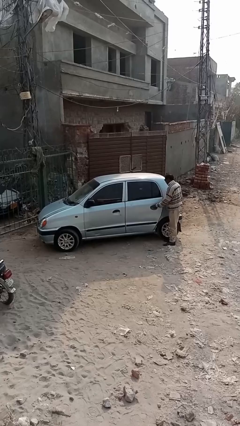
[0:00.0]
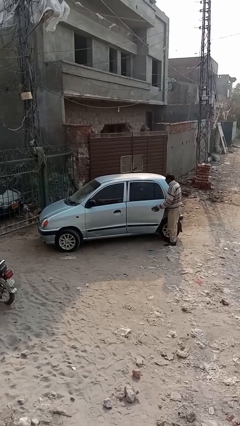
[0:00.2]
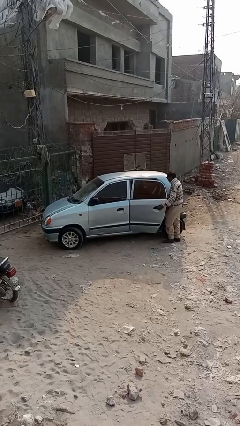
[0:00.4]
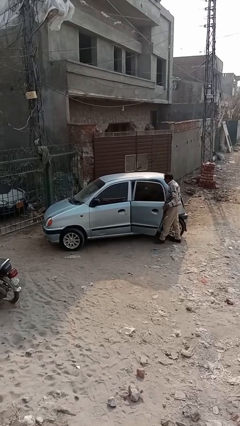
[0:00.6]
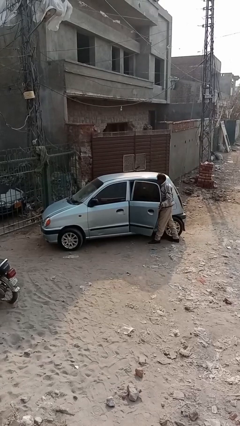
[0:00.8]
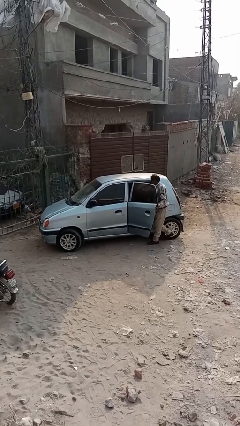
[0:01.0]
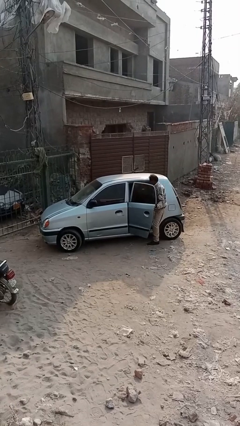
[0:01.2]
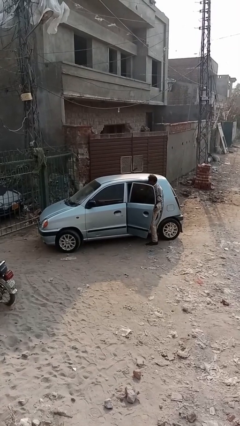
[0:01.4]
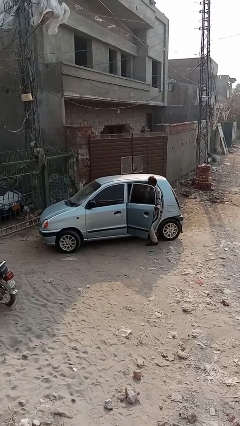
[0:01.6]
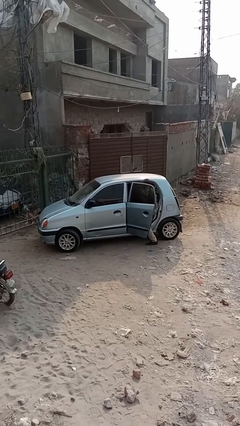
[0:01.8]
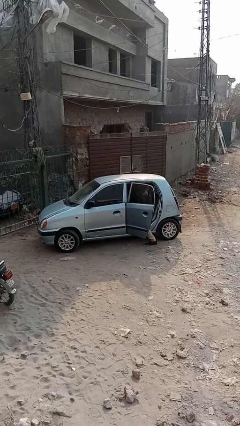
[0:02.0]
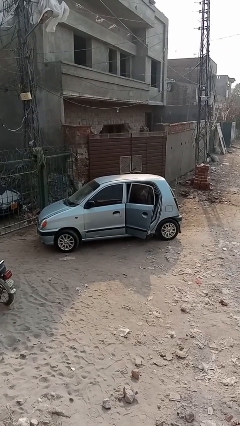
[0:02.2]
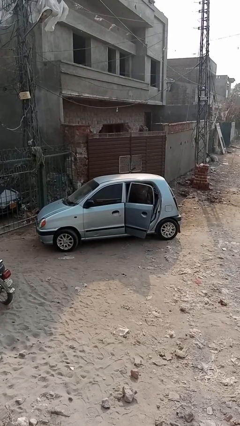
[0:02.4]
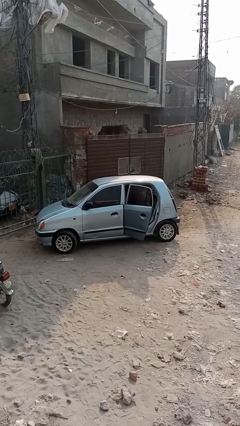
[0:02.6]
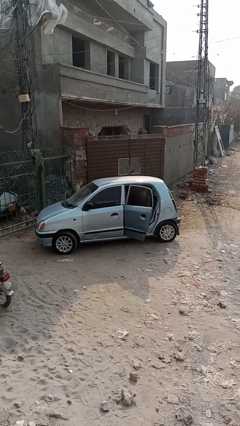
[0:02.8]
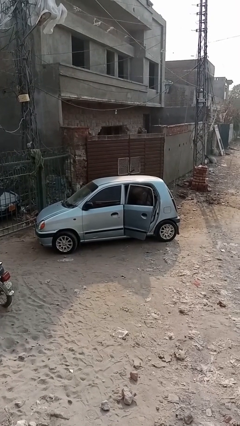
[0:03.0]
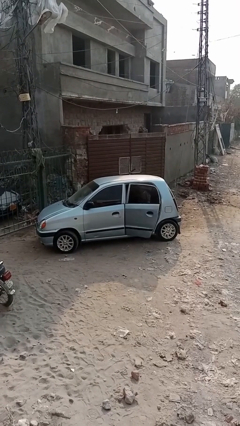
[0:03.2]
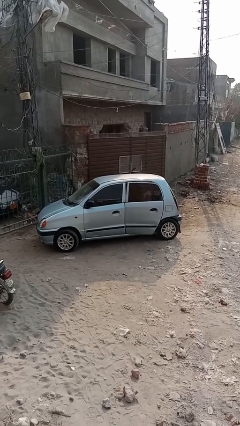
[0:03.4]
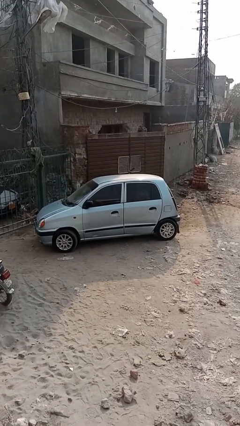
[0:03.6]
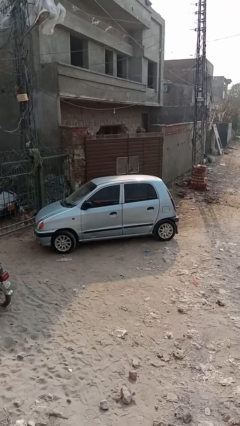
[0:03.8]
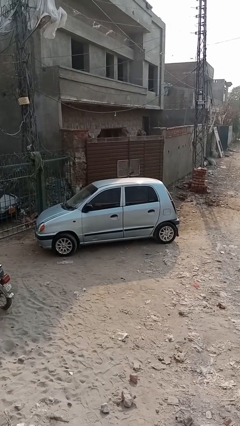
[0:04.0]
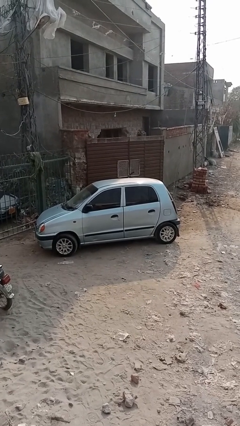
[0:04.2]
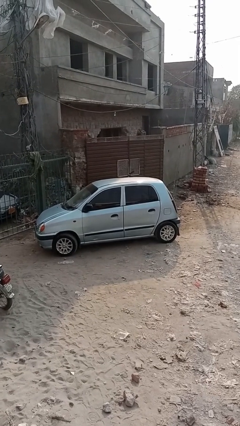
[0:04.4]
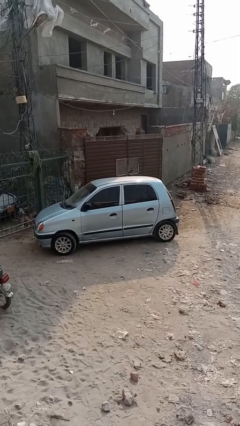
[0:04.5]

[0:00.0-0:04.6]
car picks up person

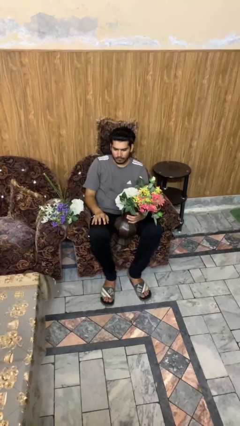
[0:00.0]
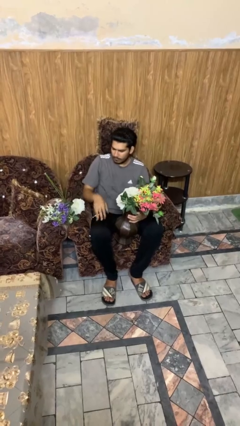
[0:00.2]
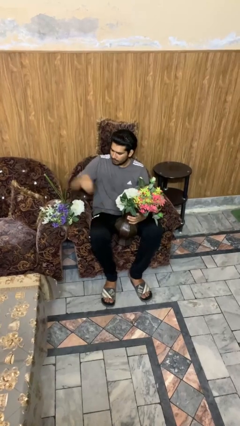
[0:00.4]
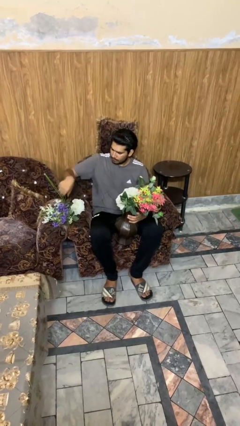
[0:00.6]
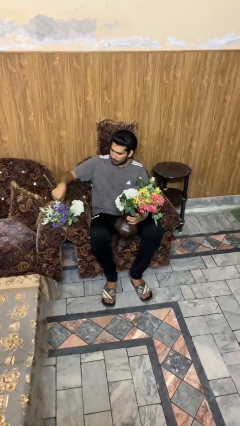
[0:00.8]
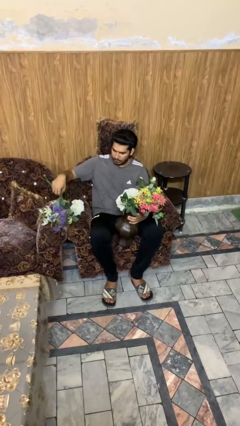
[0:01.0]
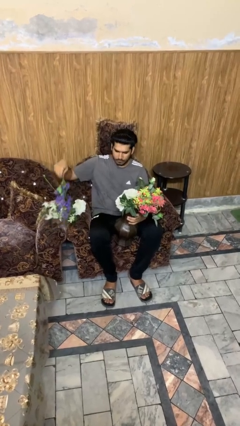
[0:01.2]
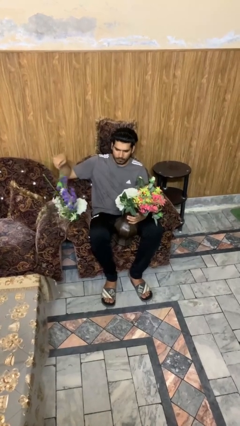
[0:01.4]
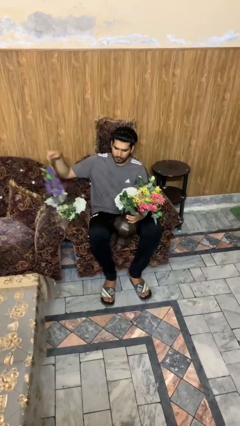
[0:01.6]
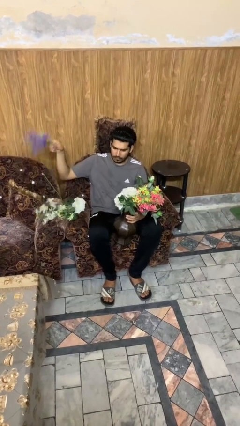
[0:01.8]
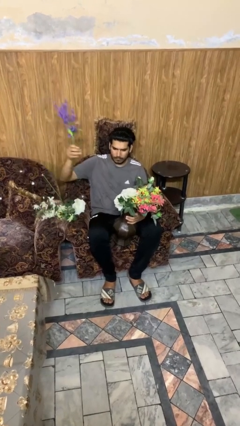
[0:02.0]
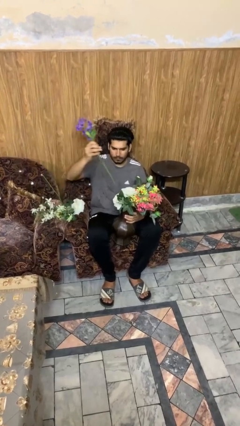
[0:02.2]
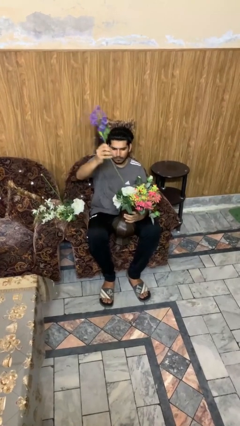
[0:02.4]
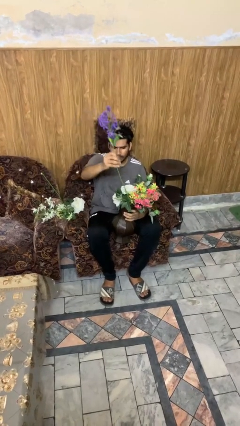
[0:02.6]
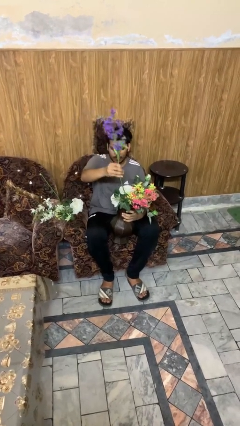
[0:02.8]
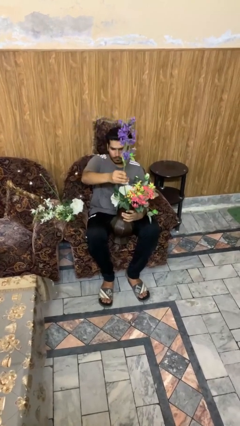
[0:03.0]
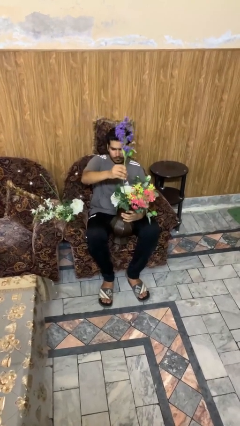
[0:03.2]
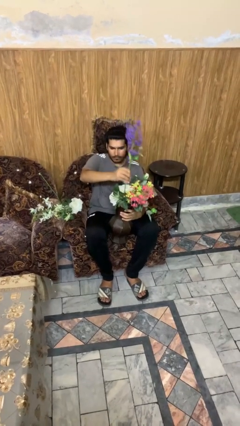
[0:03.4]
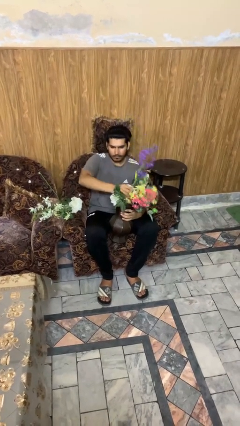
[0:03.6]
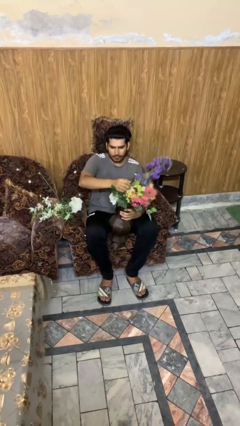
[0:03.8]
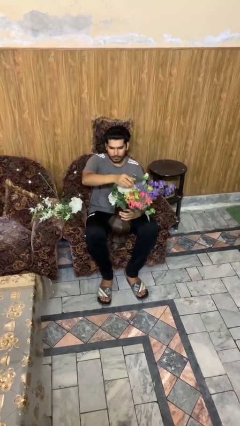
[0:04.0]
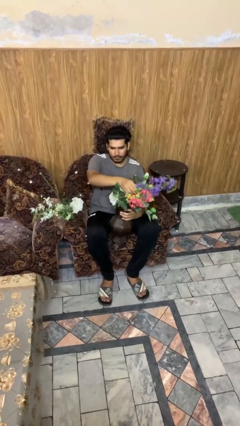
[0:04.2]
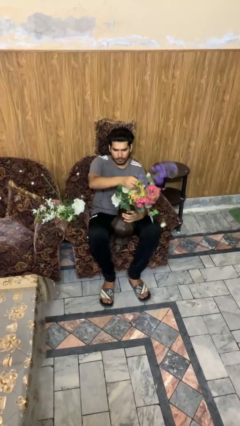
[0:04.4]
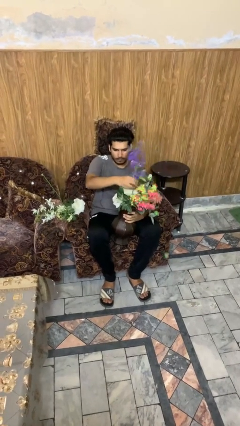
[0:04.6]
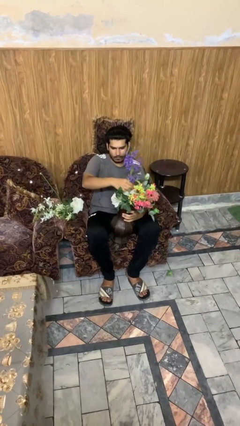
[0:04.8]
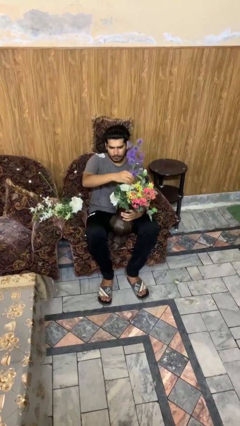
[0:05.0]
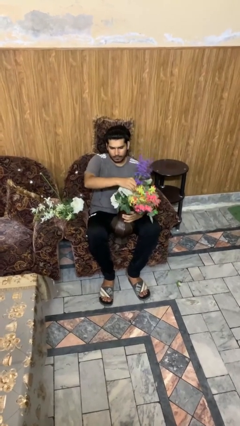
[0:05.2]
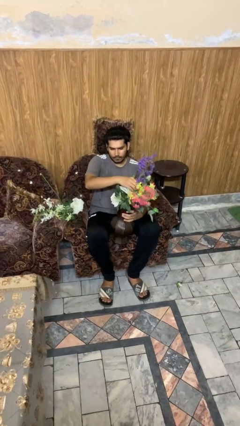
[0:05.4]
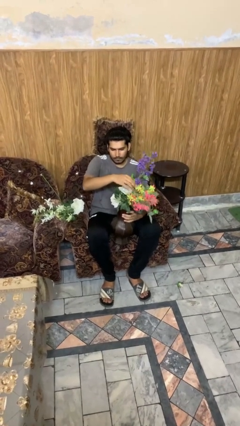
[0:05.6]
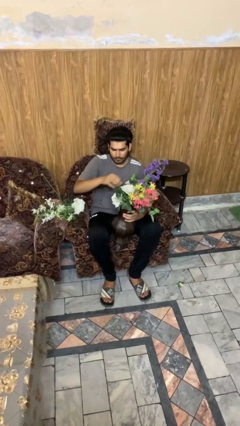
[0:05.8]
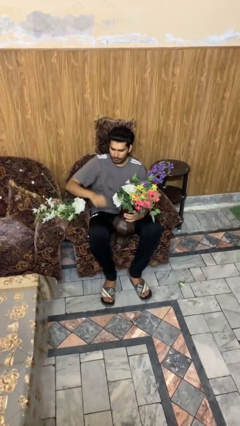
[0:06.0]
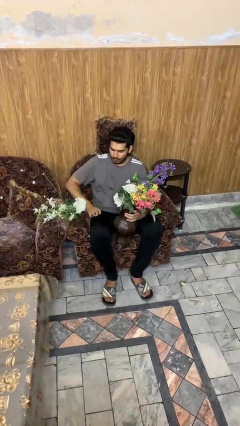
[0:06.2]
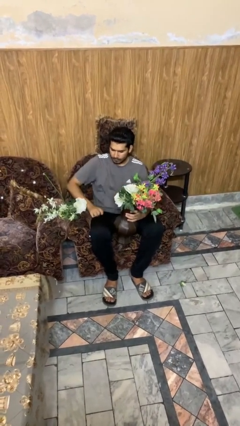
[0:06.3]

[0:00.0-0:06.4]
person arranges flowers in vase

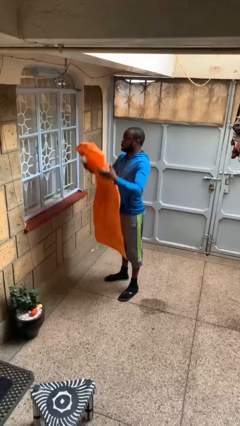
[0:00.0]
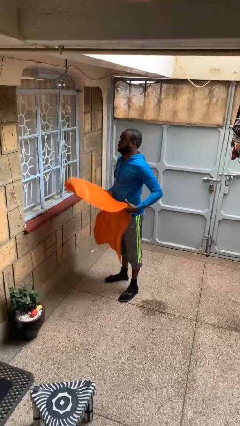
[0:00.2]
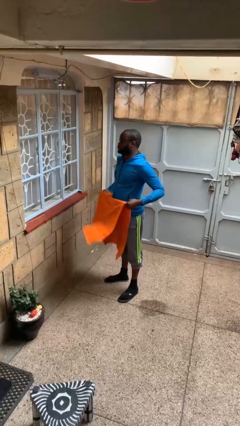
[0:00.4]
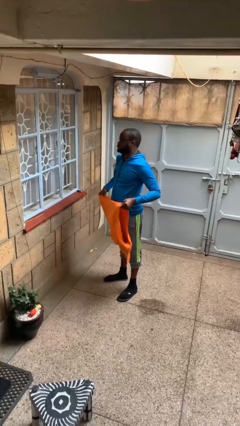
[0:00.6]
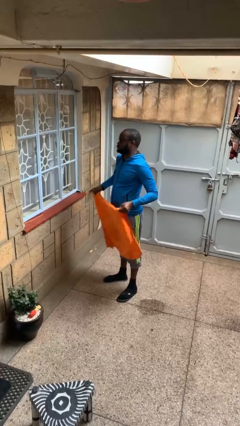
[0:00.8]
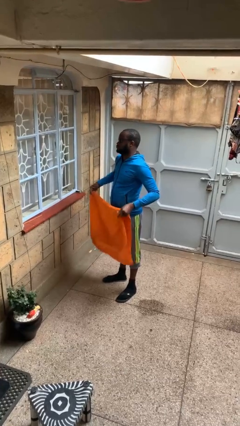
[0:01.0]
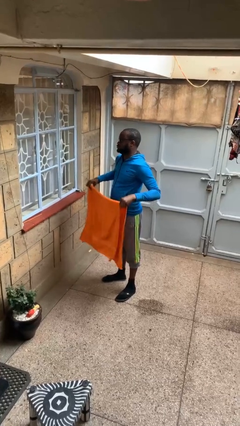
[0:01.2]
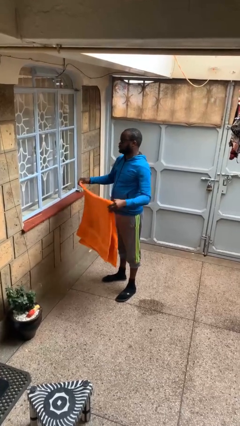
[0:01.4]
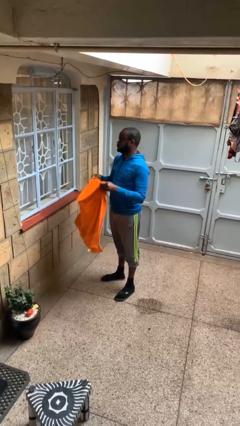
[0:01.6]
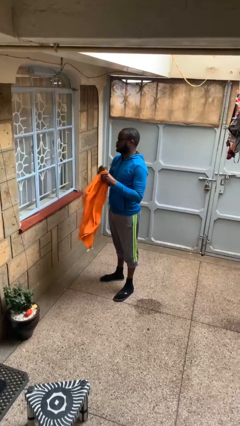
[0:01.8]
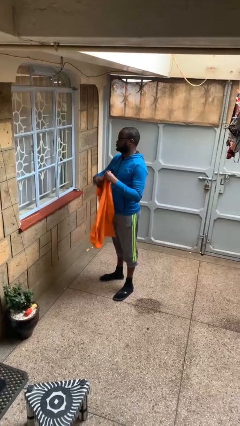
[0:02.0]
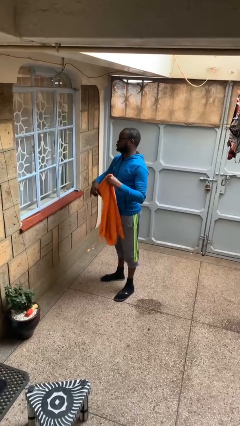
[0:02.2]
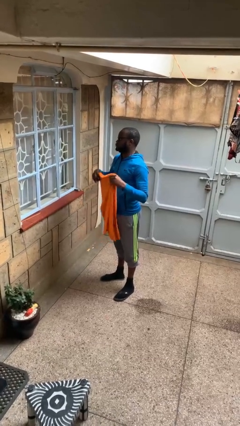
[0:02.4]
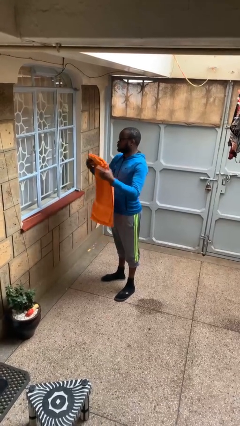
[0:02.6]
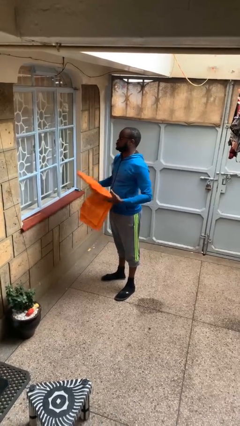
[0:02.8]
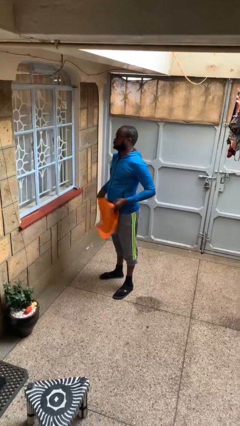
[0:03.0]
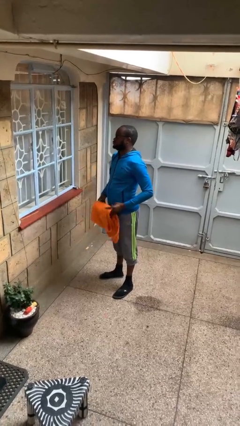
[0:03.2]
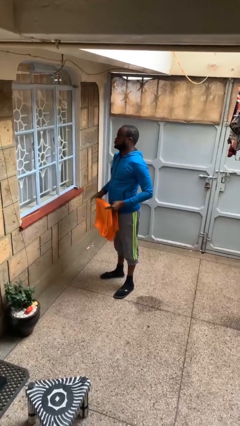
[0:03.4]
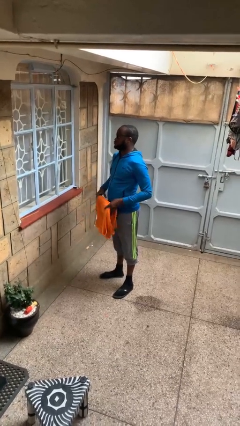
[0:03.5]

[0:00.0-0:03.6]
person folds towel

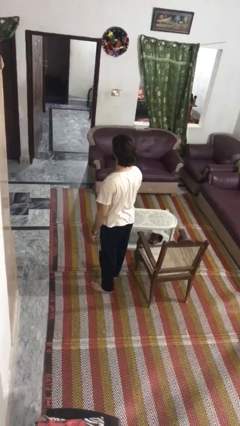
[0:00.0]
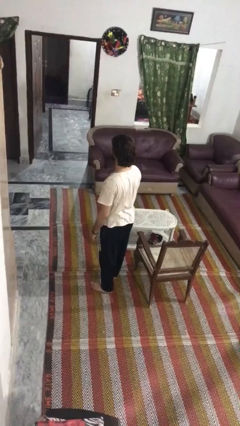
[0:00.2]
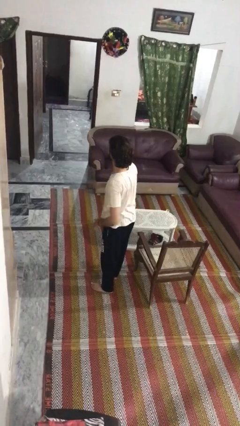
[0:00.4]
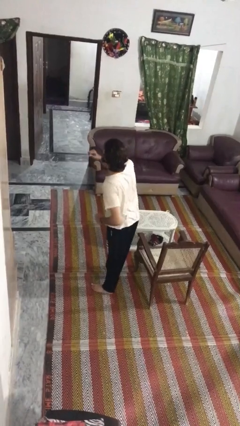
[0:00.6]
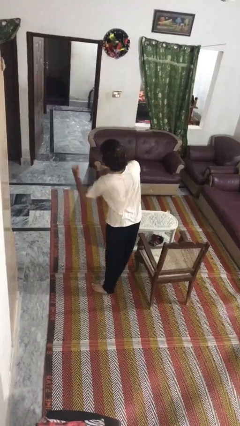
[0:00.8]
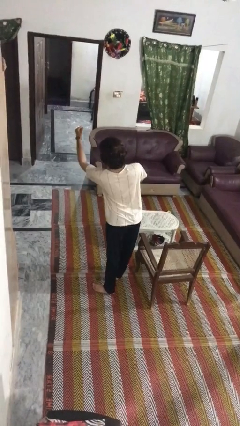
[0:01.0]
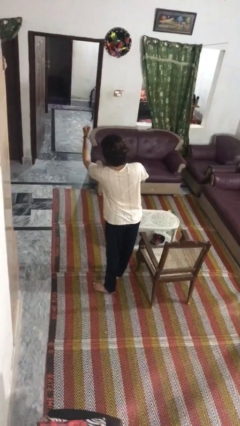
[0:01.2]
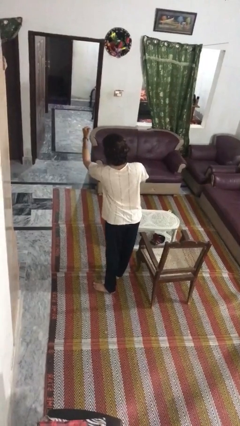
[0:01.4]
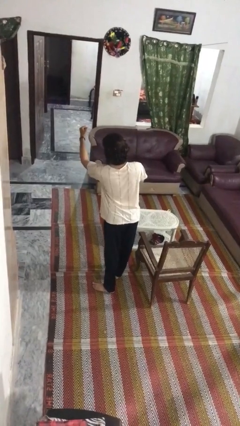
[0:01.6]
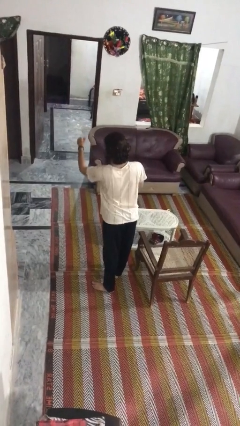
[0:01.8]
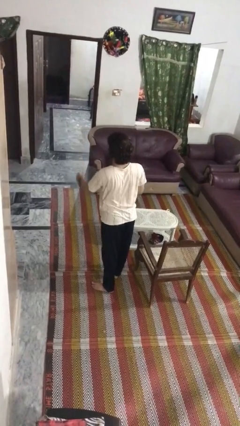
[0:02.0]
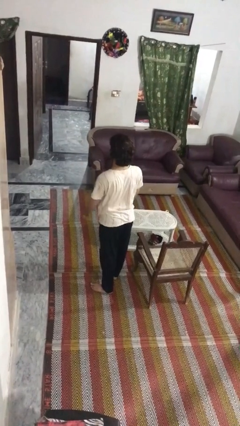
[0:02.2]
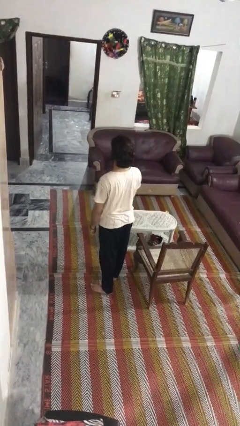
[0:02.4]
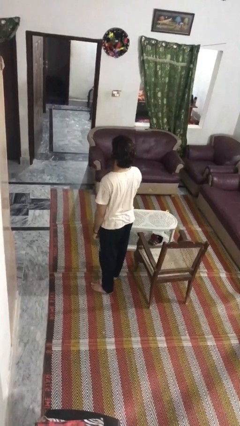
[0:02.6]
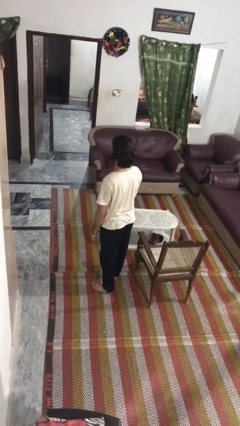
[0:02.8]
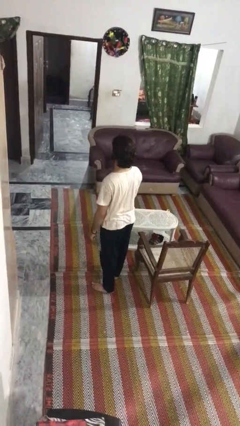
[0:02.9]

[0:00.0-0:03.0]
person punches
